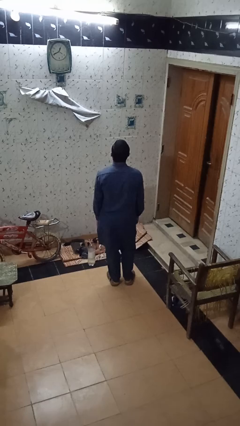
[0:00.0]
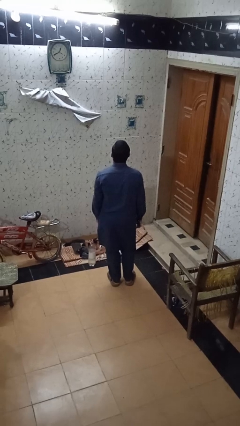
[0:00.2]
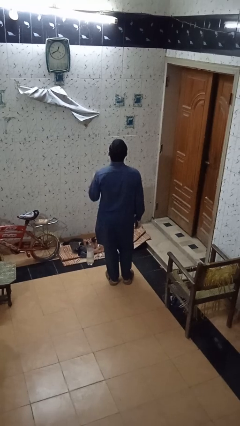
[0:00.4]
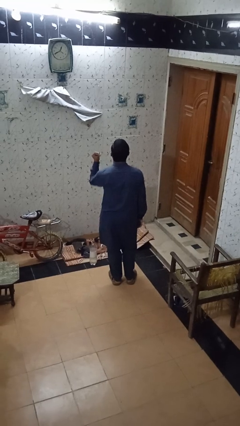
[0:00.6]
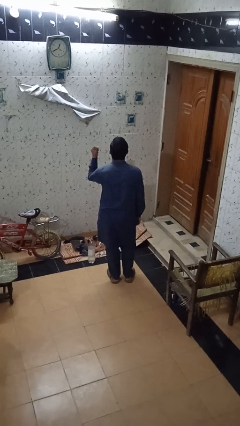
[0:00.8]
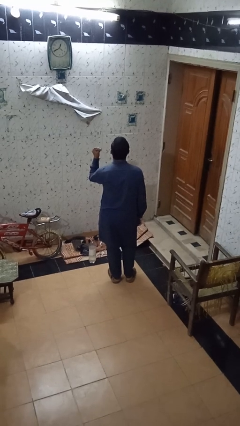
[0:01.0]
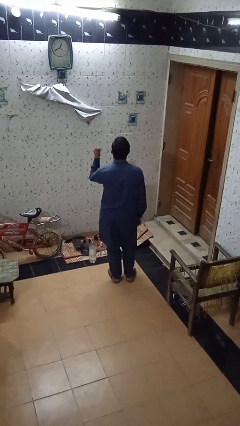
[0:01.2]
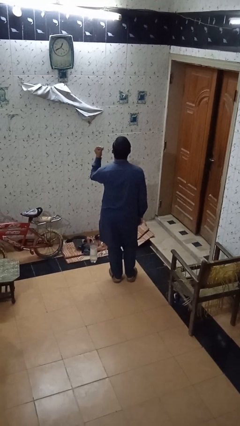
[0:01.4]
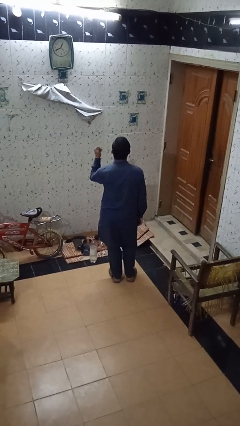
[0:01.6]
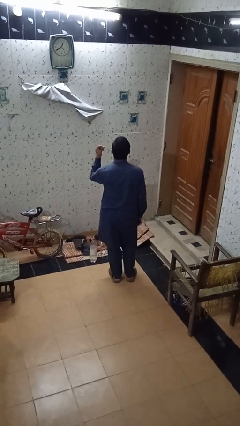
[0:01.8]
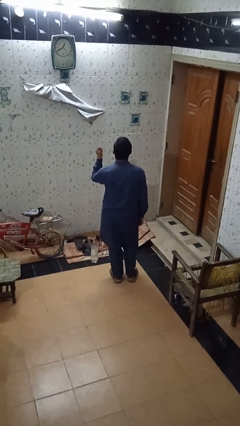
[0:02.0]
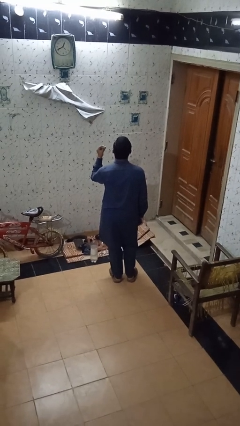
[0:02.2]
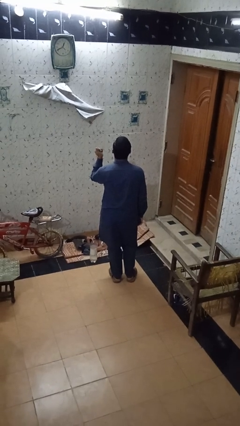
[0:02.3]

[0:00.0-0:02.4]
person snaps fingers

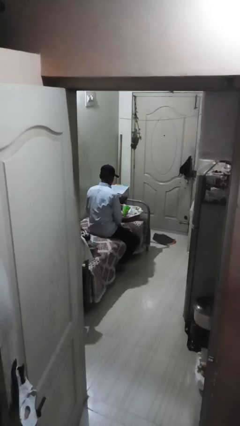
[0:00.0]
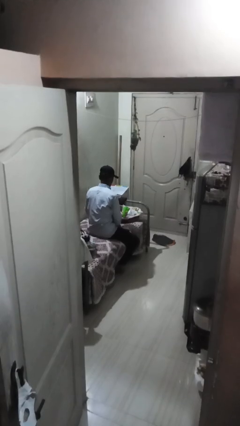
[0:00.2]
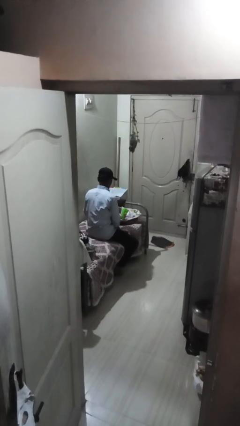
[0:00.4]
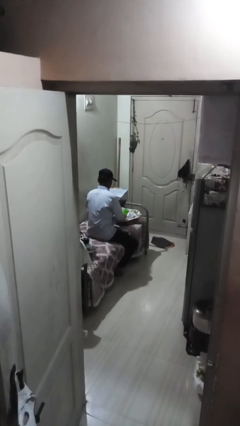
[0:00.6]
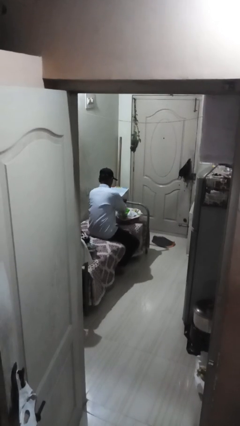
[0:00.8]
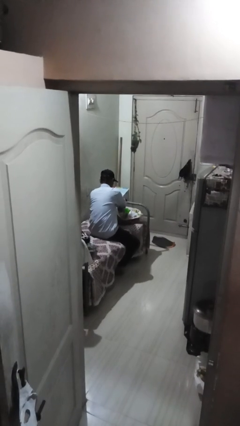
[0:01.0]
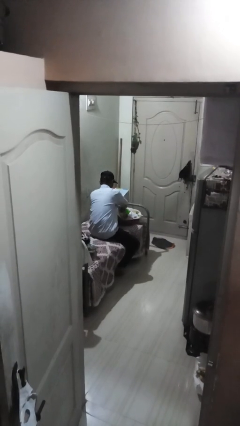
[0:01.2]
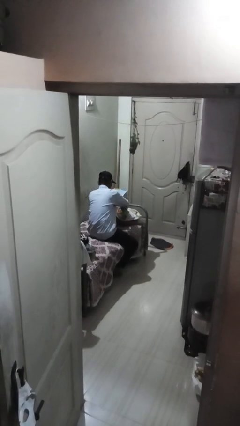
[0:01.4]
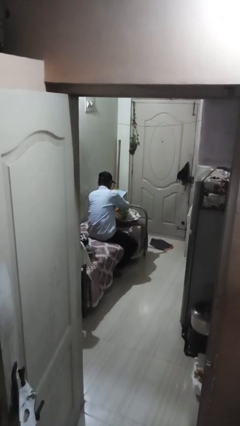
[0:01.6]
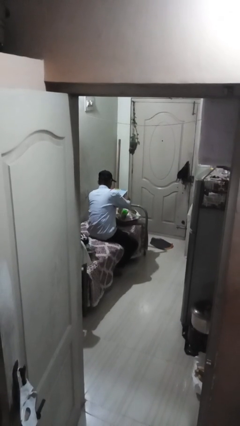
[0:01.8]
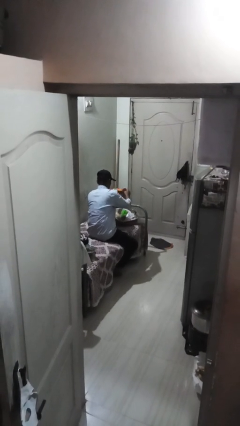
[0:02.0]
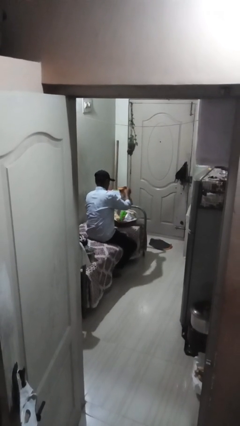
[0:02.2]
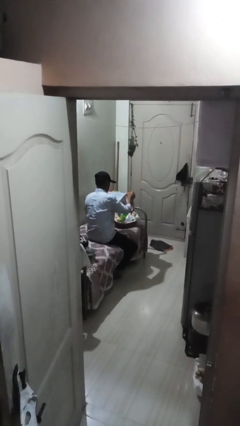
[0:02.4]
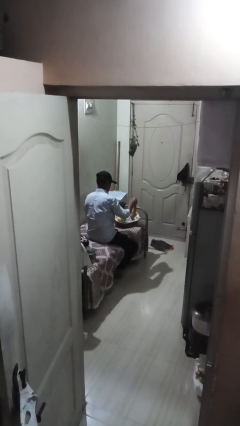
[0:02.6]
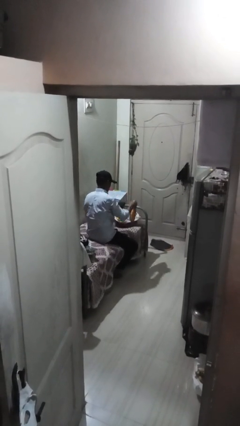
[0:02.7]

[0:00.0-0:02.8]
person takes object from bag

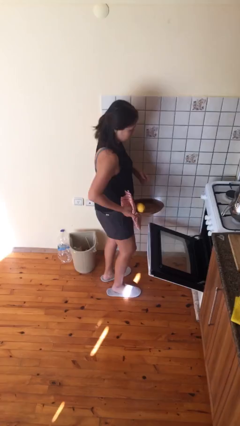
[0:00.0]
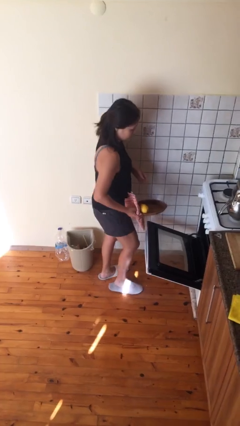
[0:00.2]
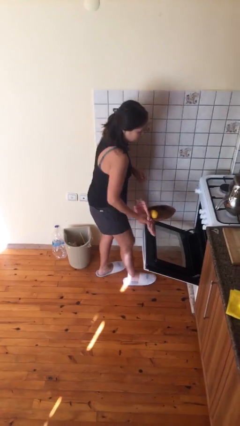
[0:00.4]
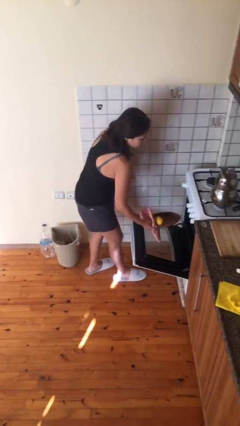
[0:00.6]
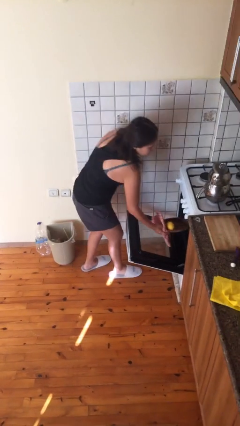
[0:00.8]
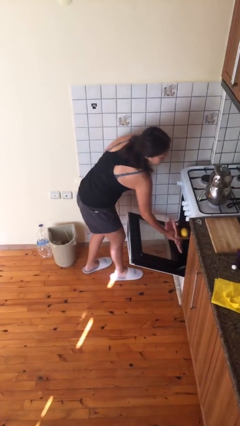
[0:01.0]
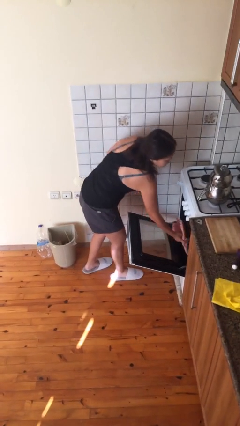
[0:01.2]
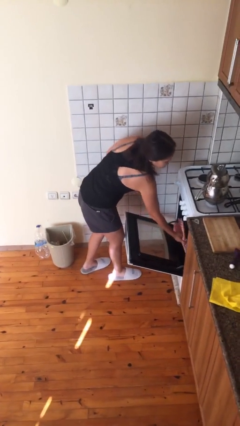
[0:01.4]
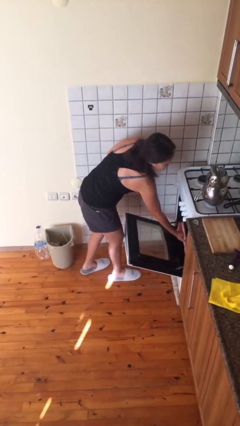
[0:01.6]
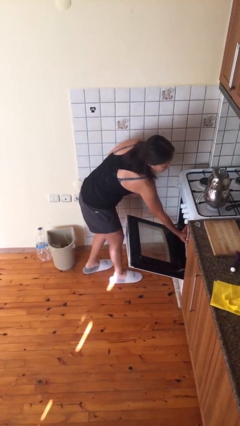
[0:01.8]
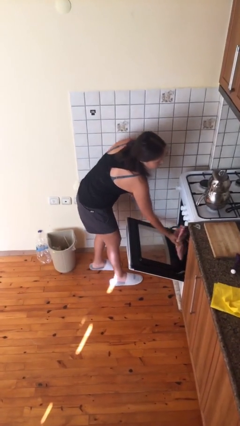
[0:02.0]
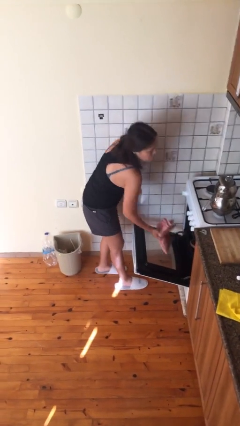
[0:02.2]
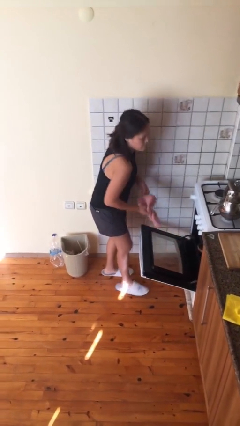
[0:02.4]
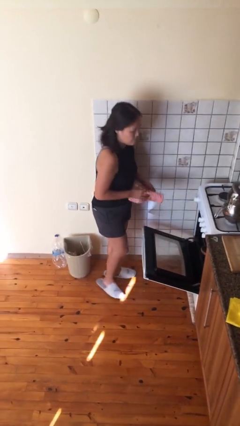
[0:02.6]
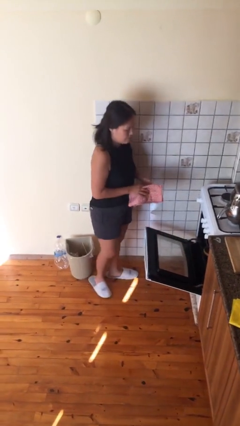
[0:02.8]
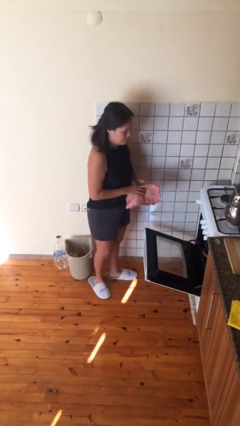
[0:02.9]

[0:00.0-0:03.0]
person puts object into oven

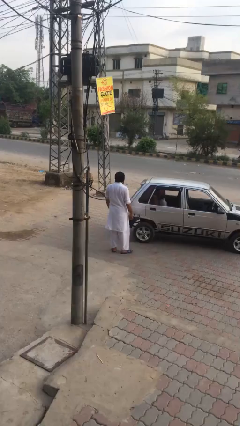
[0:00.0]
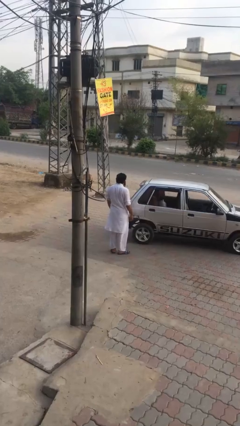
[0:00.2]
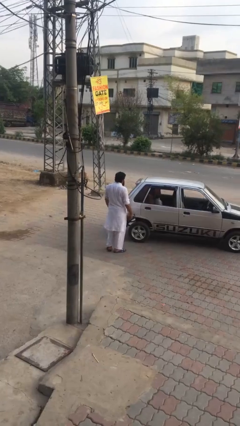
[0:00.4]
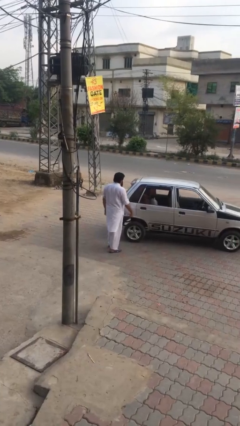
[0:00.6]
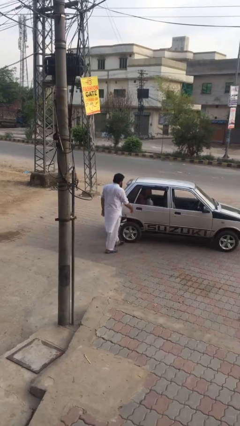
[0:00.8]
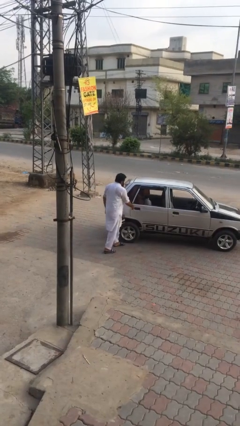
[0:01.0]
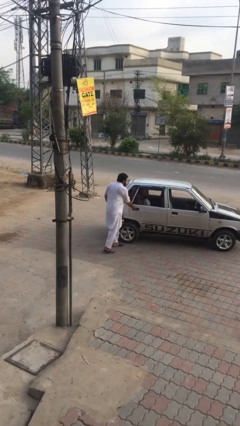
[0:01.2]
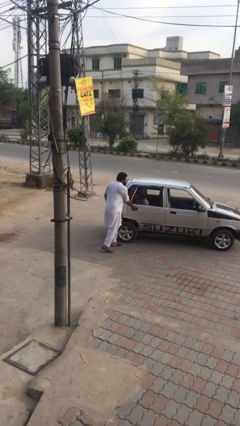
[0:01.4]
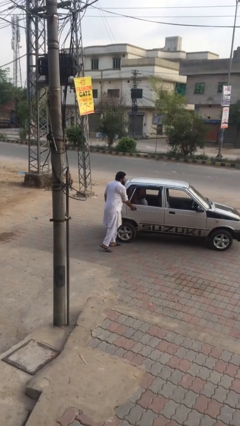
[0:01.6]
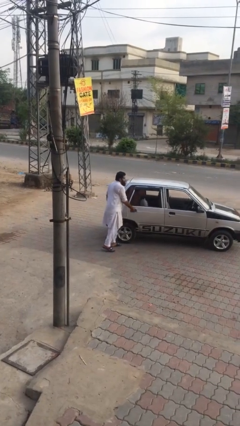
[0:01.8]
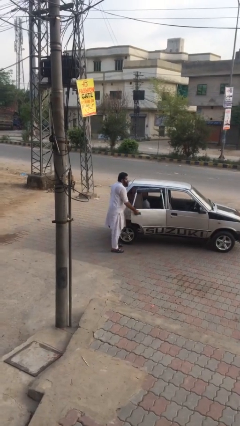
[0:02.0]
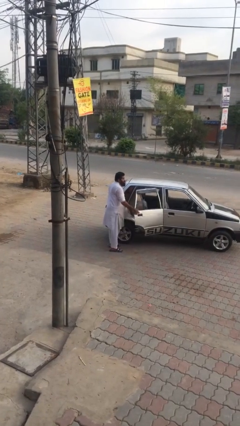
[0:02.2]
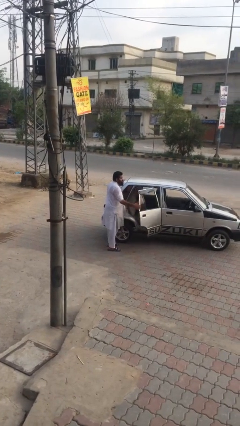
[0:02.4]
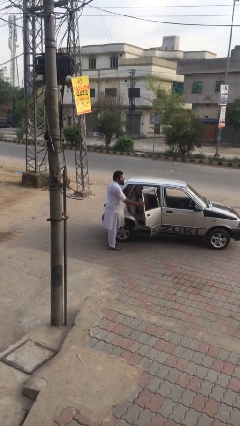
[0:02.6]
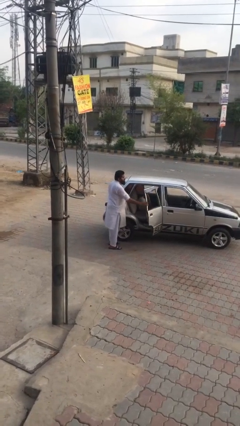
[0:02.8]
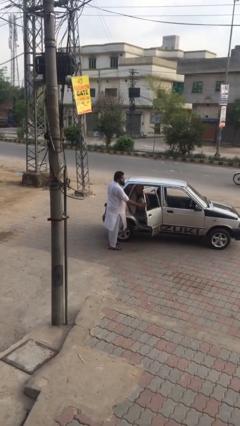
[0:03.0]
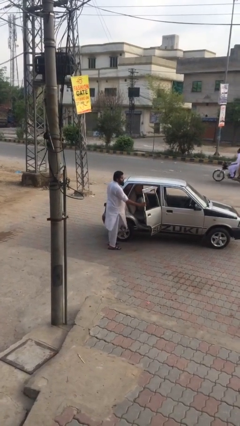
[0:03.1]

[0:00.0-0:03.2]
person opens car door

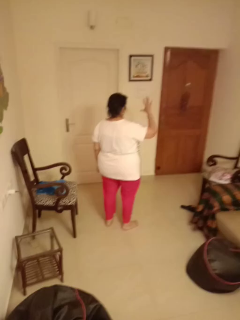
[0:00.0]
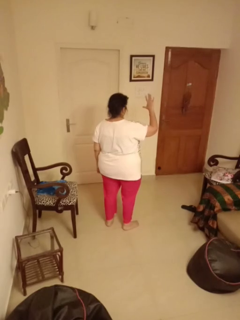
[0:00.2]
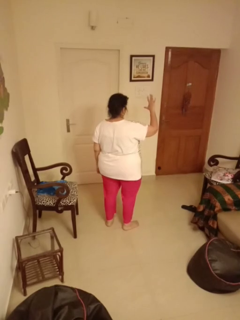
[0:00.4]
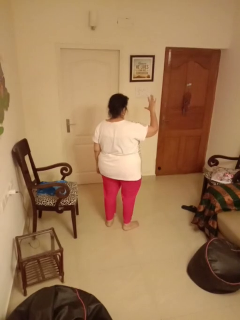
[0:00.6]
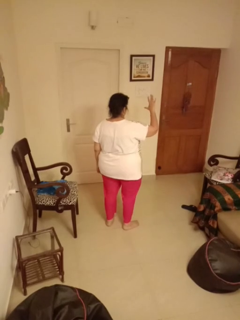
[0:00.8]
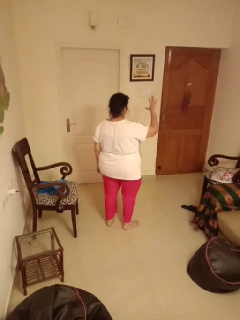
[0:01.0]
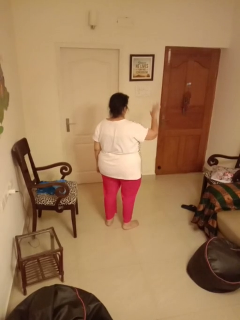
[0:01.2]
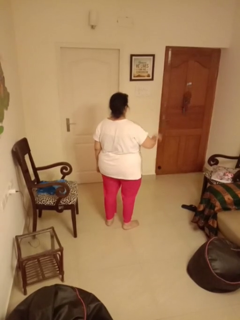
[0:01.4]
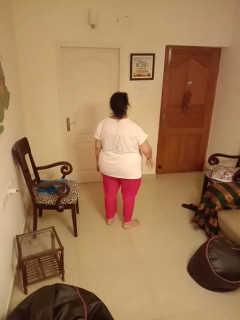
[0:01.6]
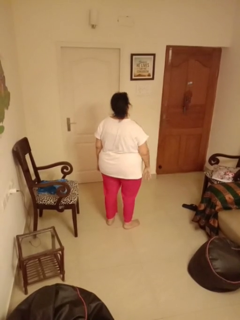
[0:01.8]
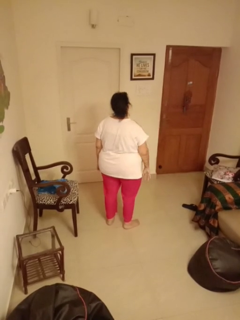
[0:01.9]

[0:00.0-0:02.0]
person gestures number five

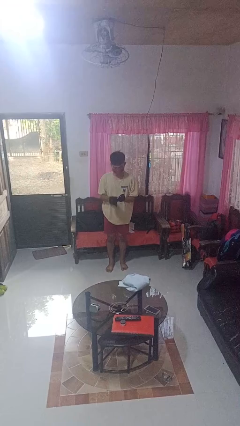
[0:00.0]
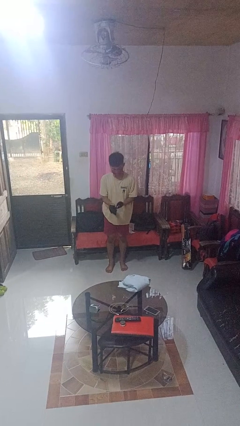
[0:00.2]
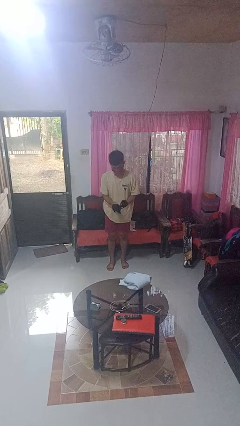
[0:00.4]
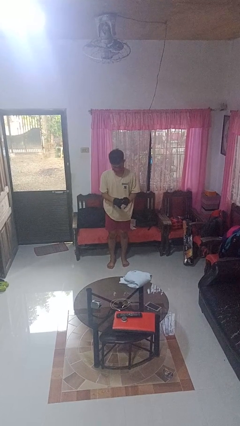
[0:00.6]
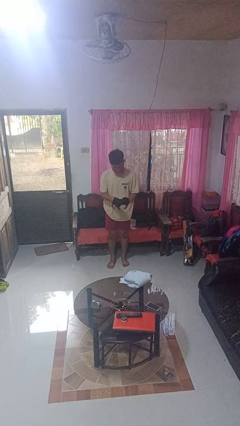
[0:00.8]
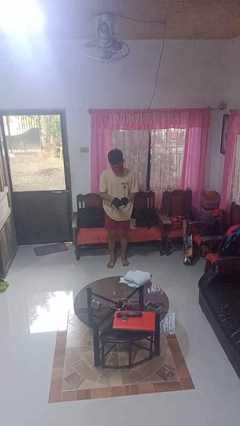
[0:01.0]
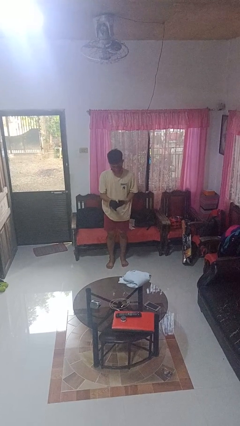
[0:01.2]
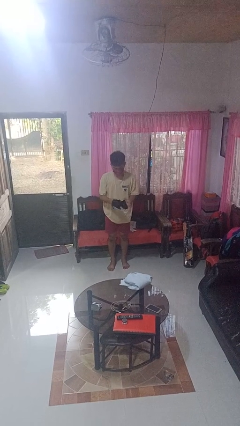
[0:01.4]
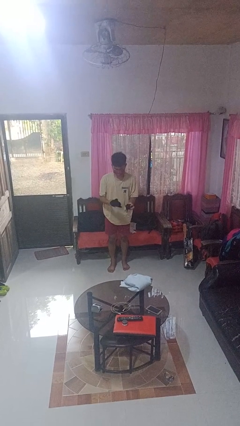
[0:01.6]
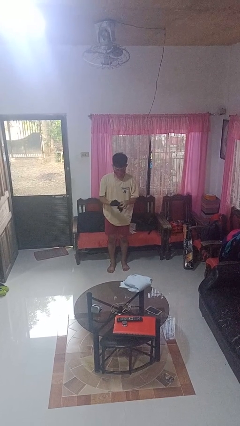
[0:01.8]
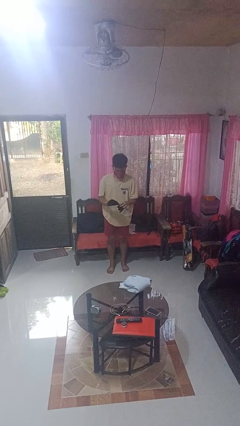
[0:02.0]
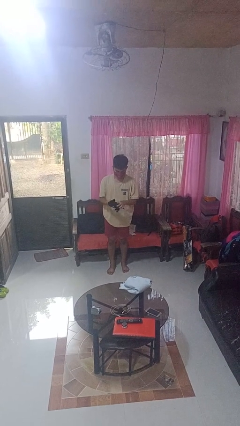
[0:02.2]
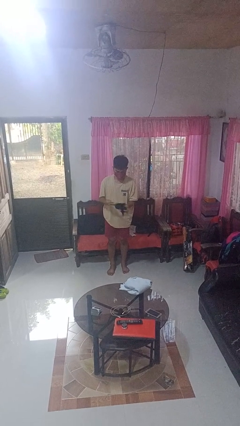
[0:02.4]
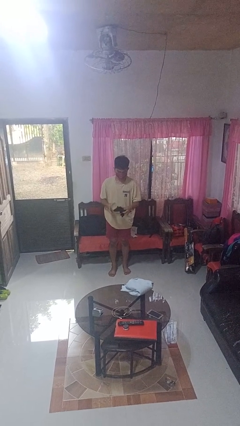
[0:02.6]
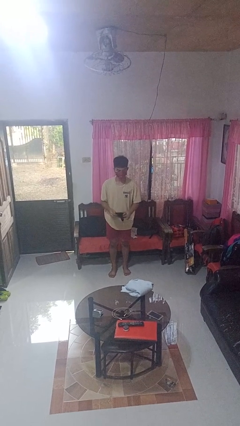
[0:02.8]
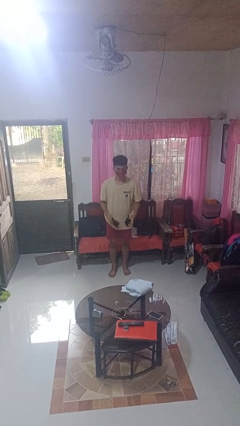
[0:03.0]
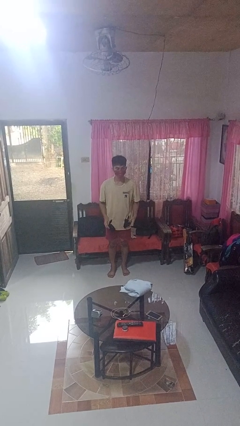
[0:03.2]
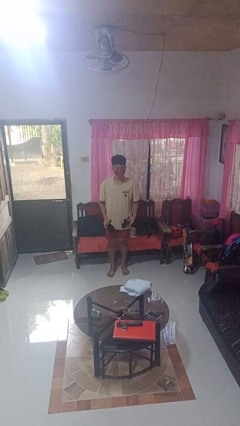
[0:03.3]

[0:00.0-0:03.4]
person takes off gloves

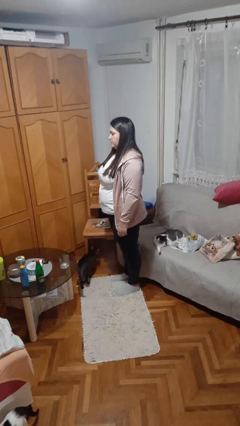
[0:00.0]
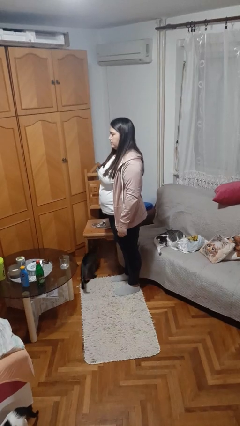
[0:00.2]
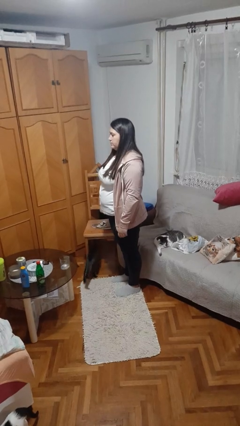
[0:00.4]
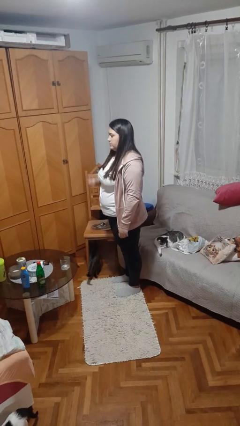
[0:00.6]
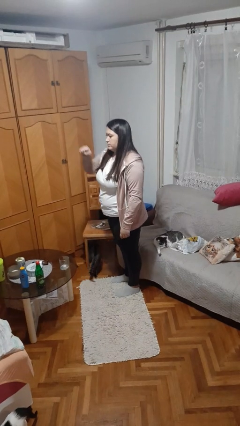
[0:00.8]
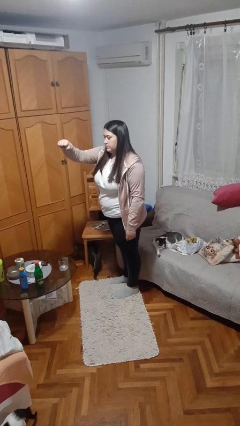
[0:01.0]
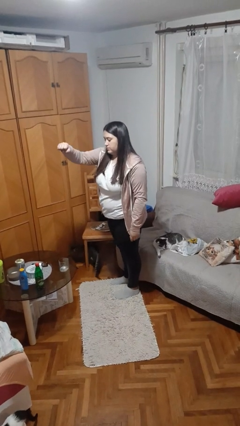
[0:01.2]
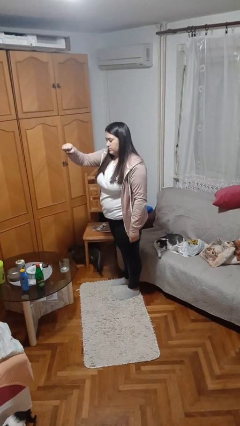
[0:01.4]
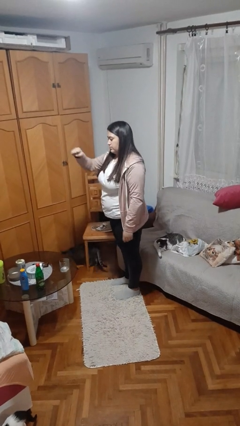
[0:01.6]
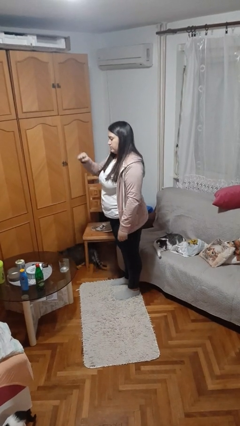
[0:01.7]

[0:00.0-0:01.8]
person punches
